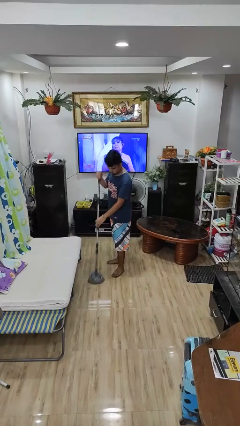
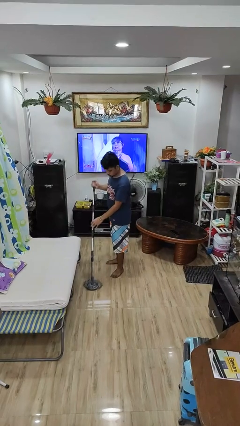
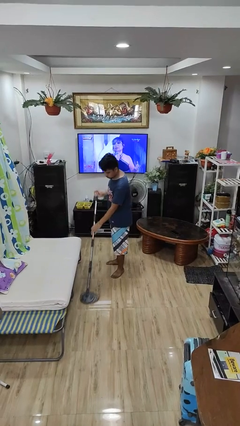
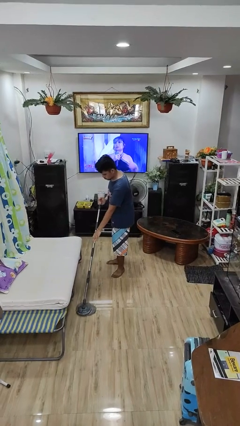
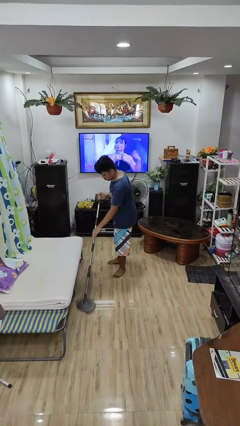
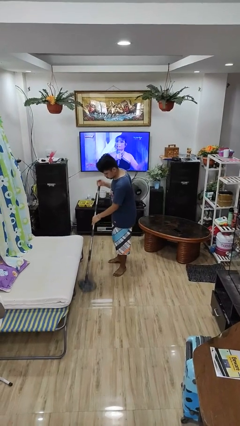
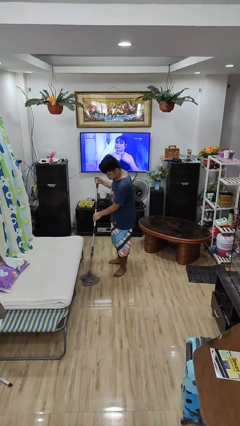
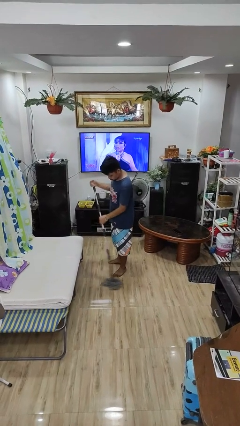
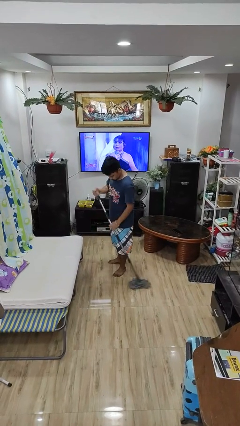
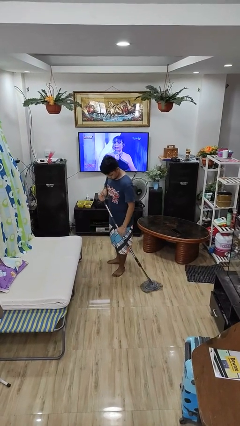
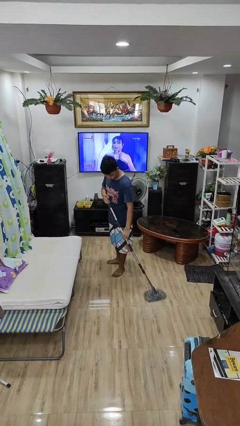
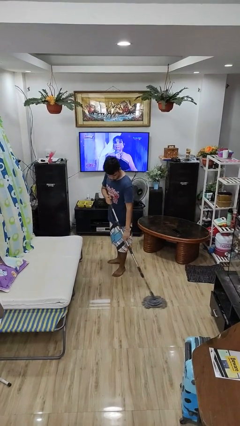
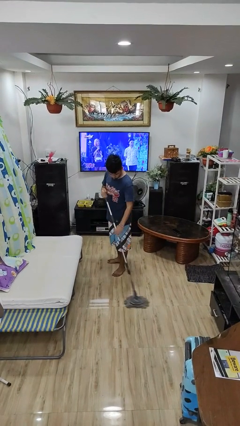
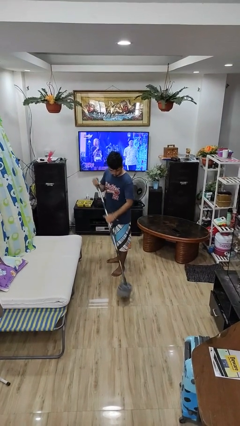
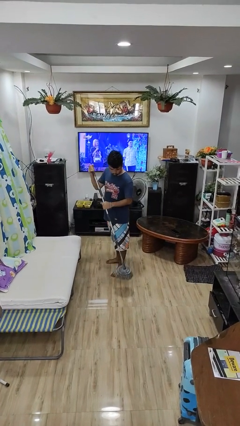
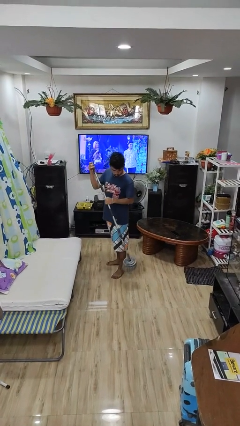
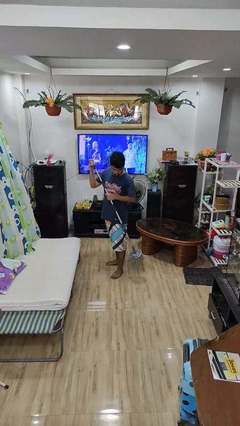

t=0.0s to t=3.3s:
person mops

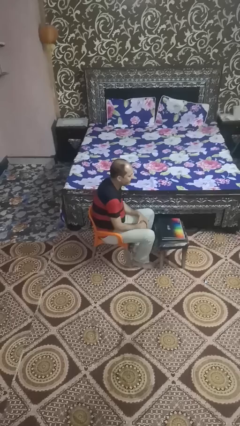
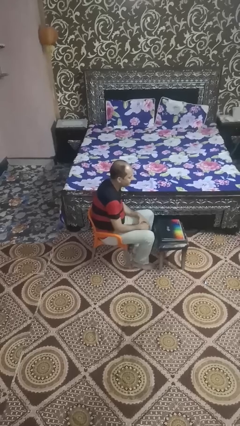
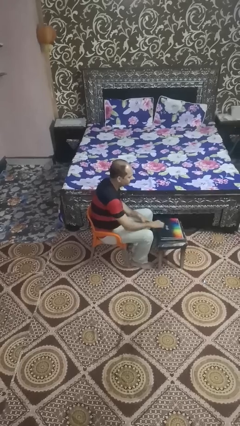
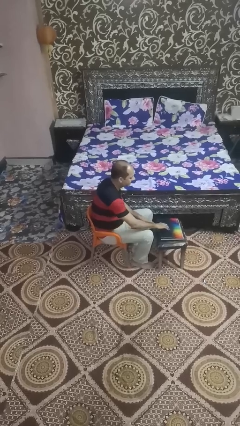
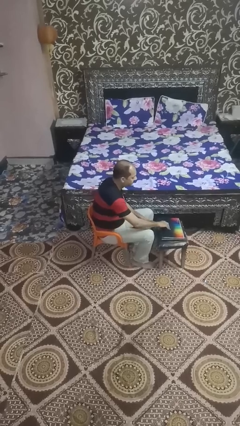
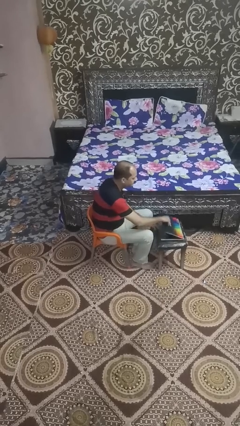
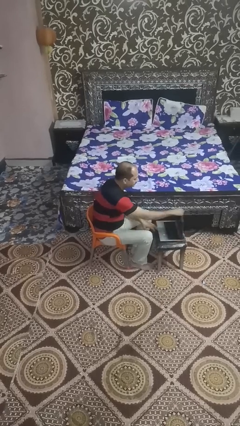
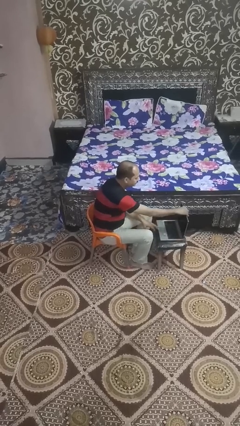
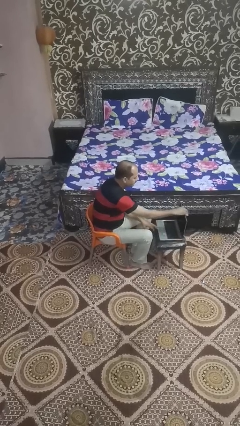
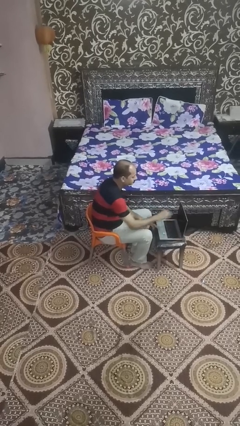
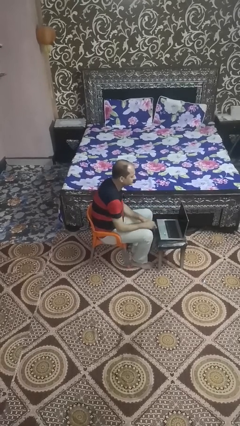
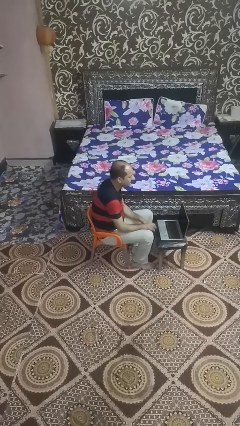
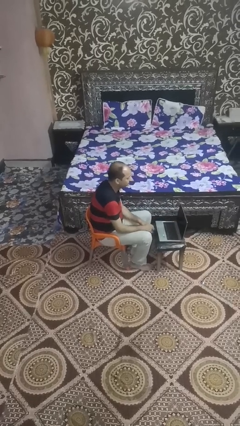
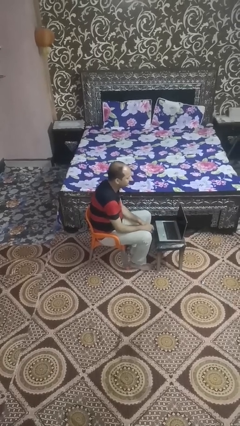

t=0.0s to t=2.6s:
person opens laptop

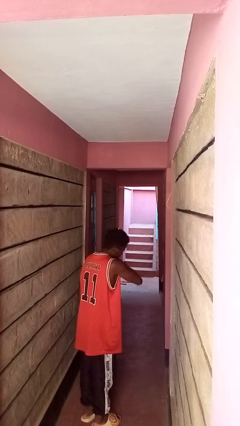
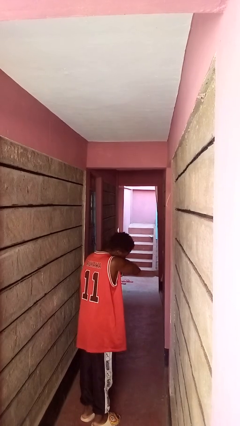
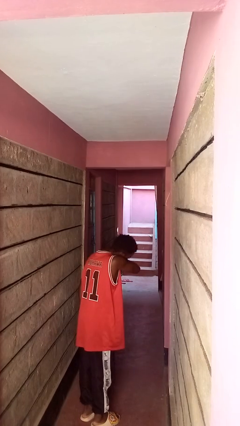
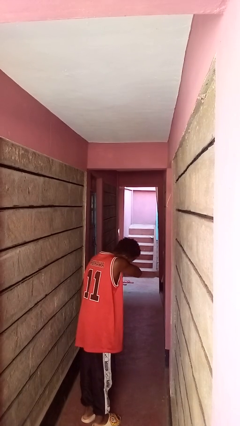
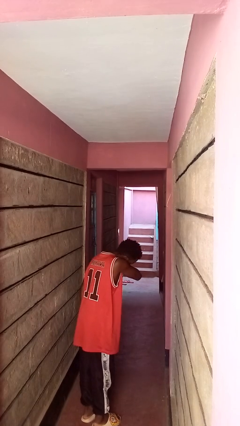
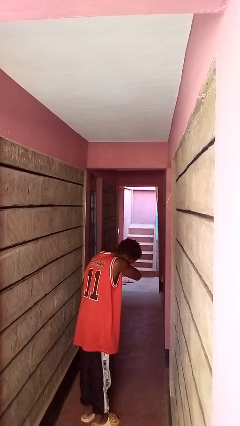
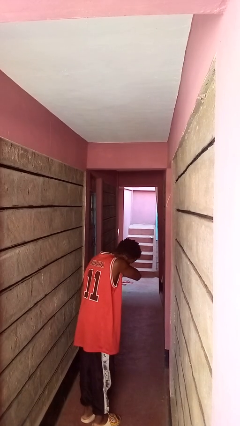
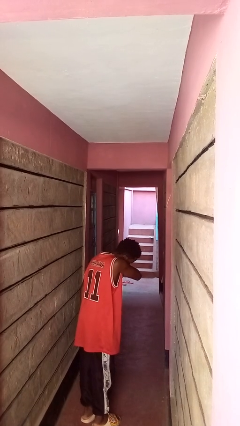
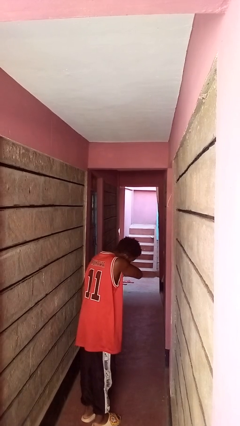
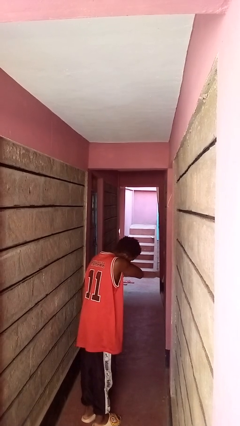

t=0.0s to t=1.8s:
person sneezes into arm

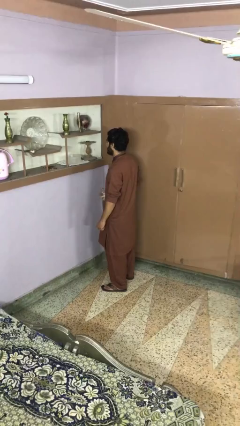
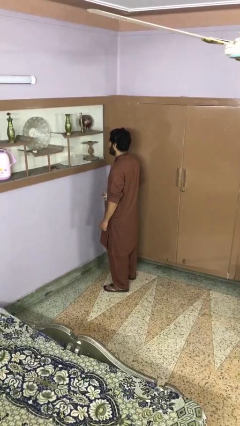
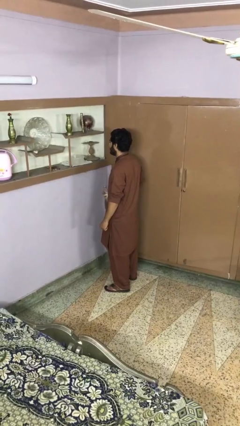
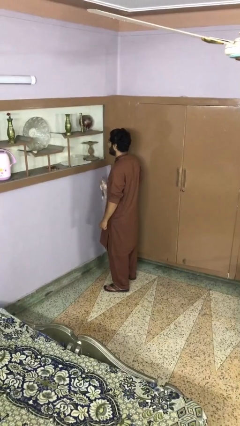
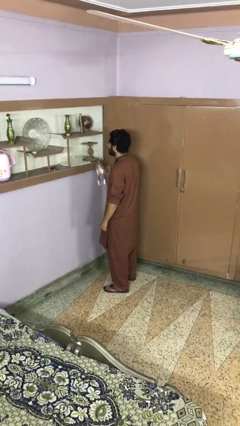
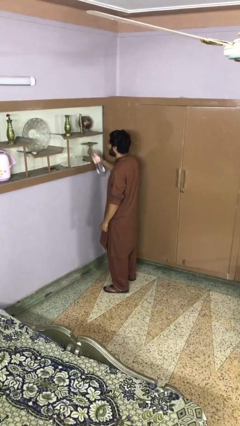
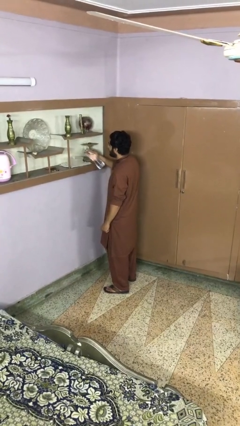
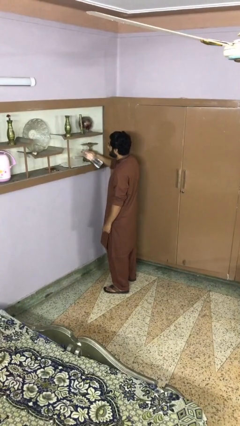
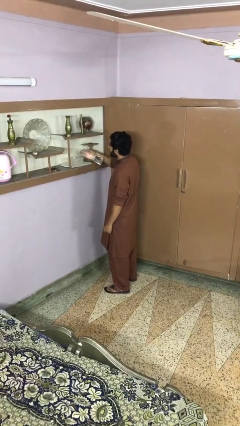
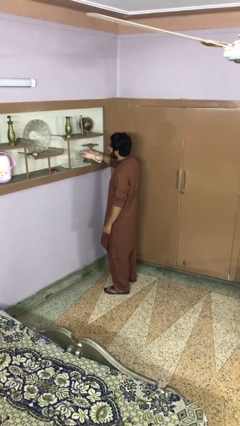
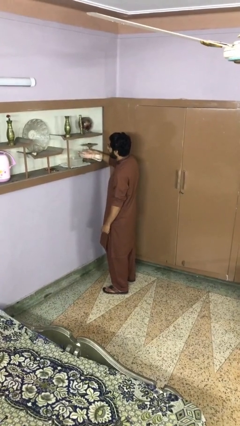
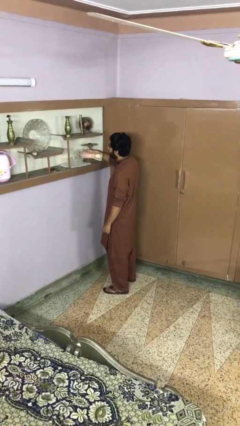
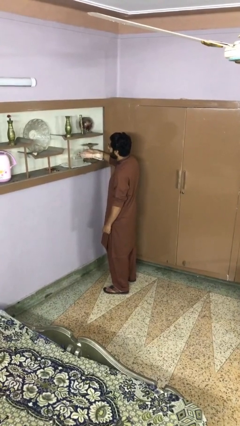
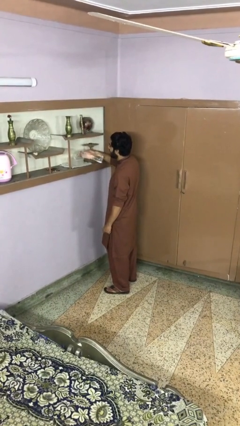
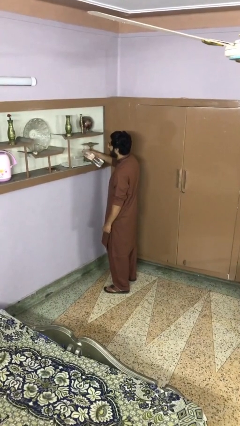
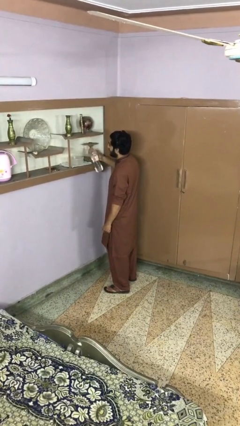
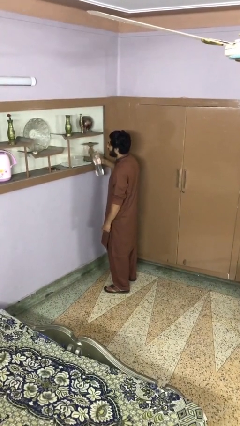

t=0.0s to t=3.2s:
person pours into bowl

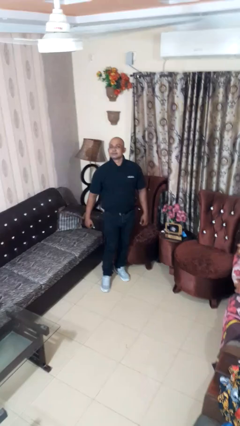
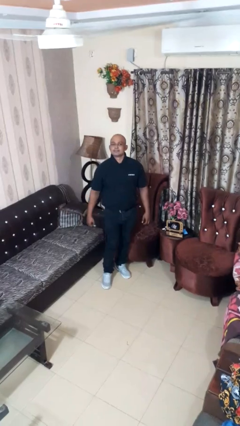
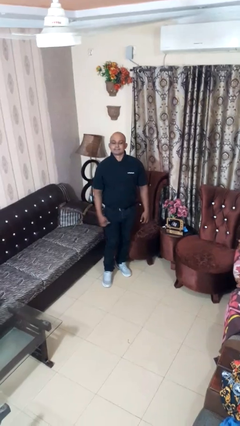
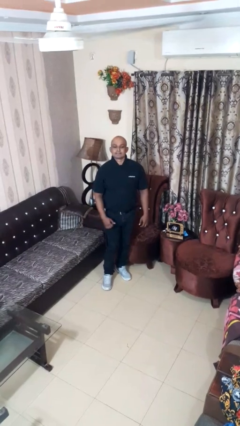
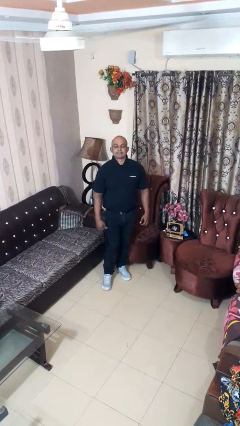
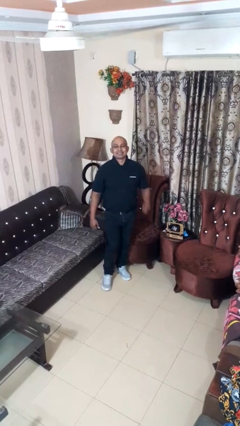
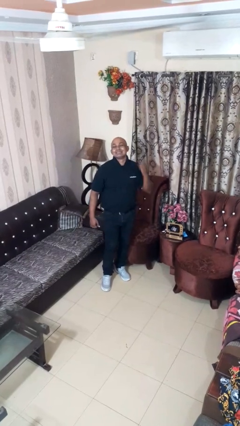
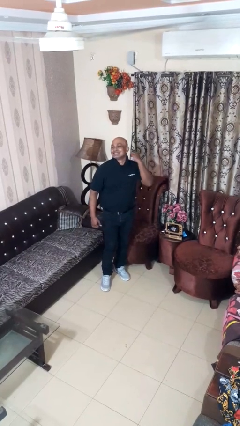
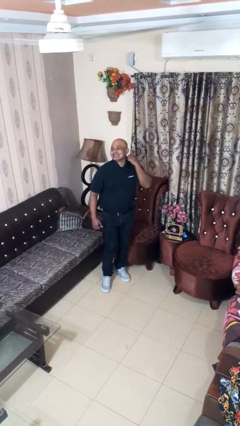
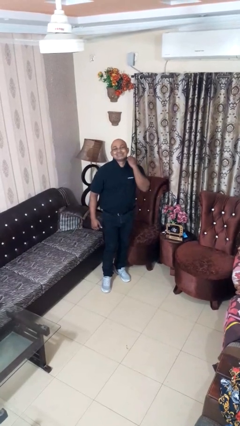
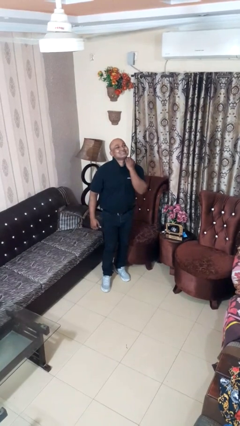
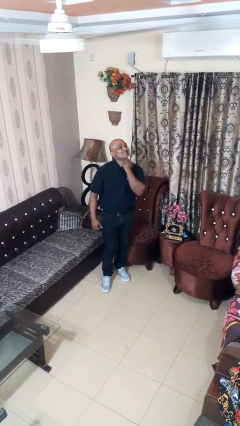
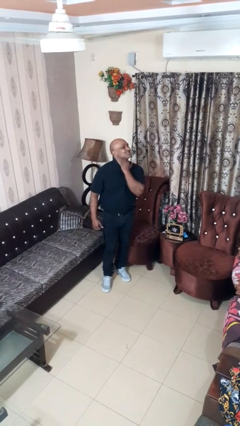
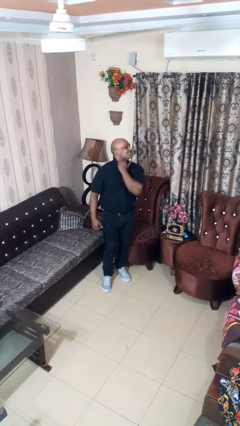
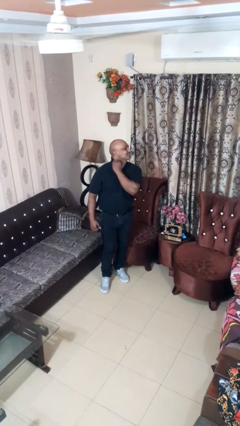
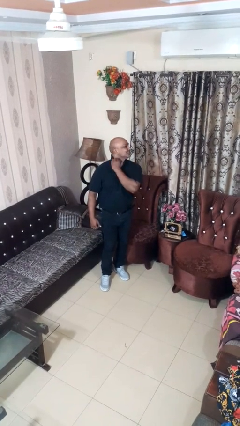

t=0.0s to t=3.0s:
person gestures cut

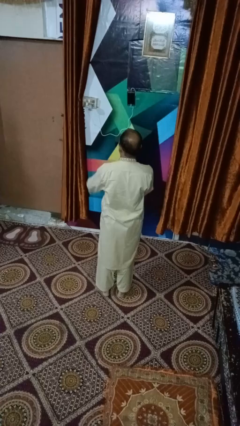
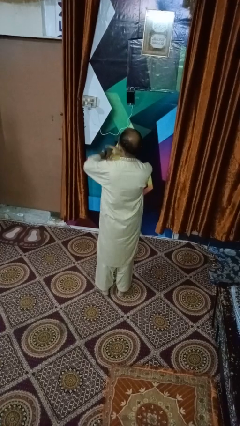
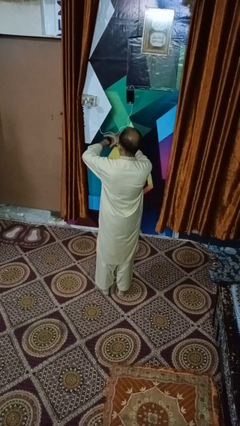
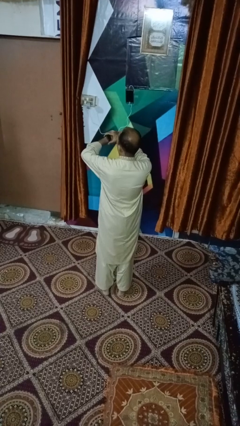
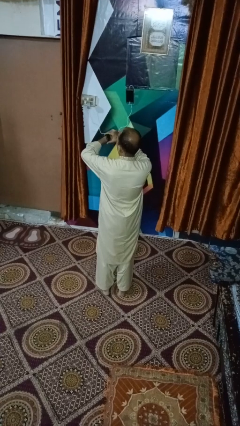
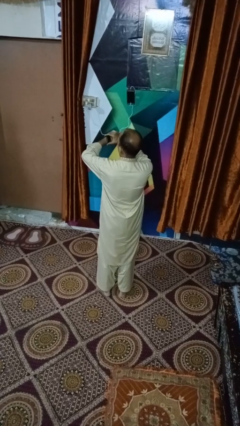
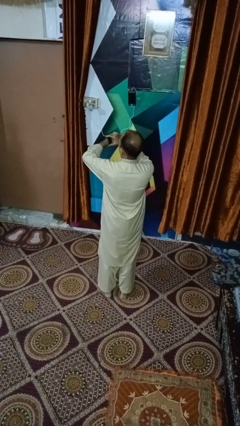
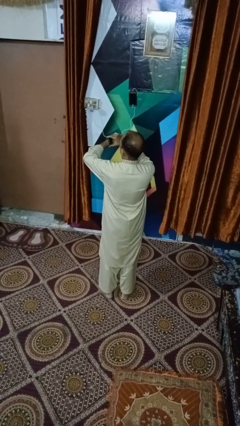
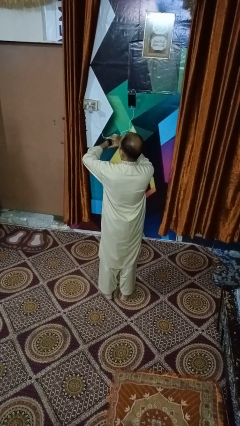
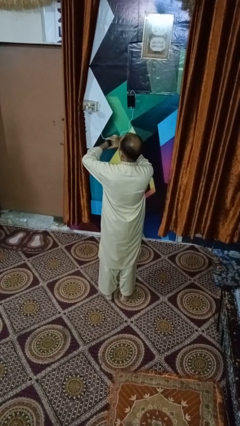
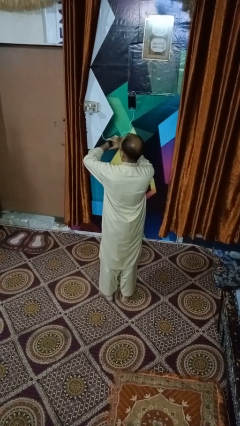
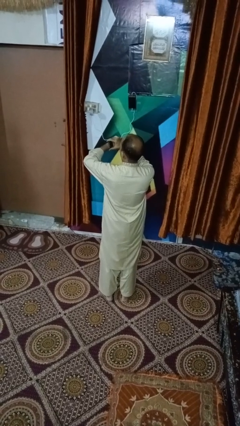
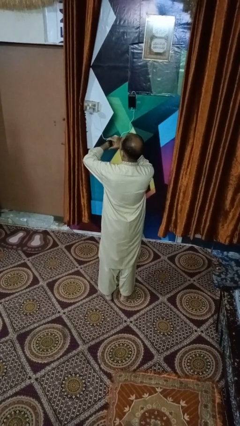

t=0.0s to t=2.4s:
person looks at wristwatch

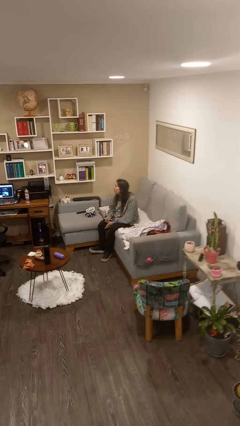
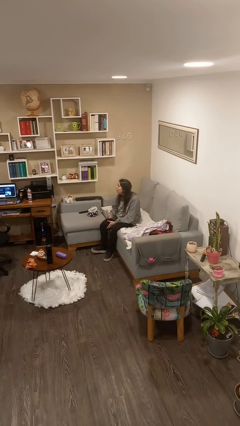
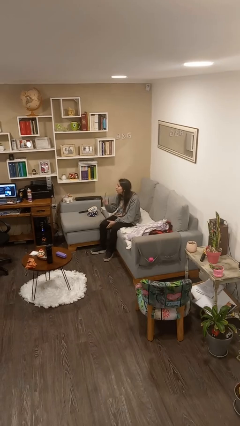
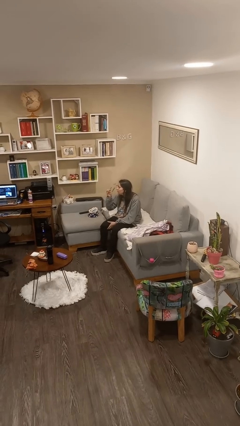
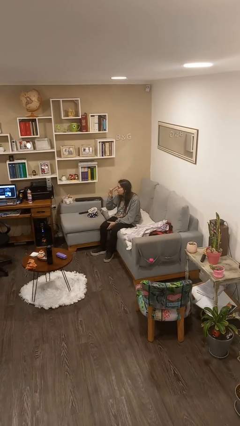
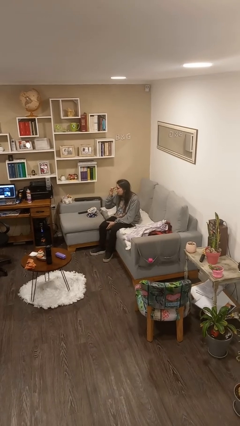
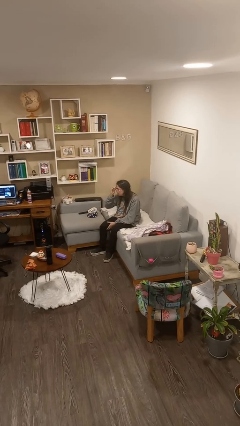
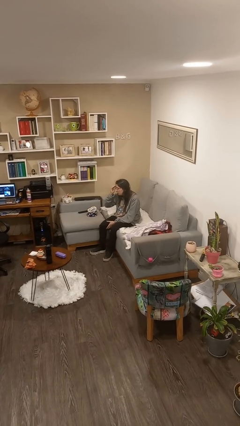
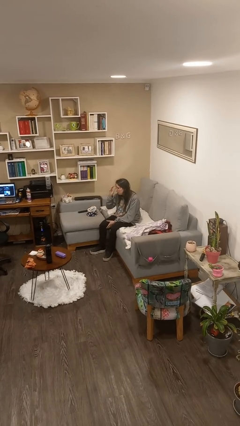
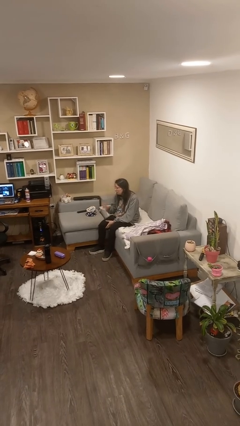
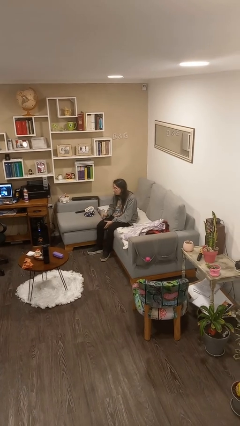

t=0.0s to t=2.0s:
person puts on glasses
